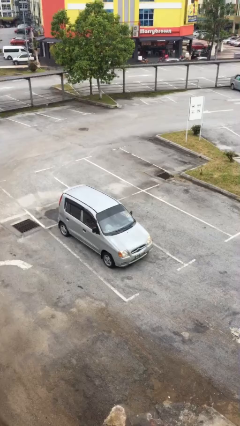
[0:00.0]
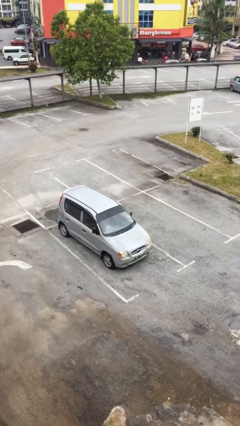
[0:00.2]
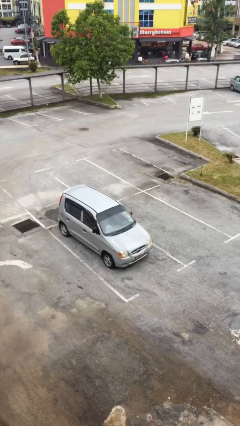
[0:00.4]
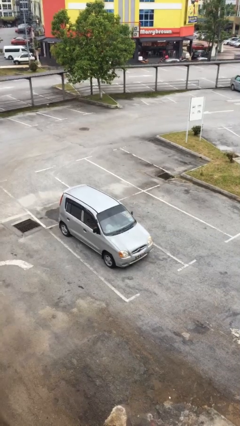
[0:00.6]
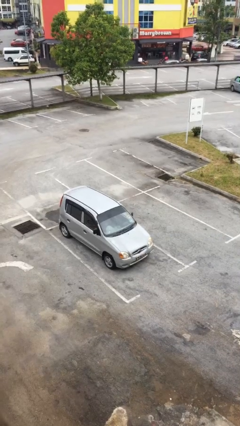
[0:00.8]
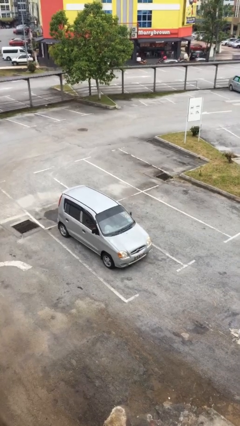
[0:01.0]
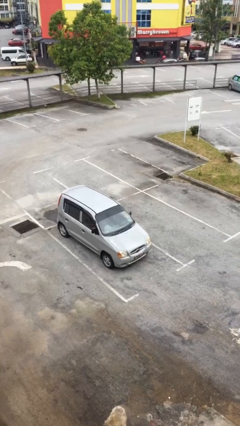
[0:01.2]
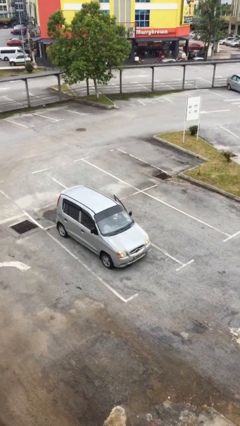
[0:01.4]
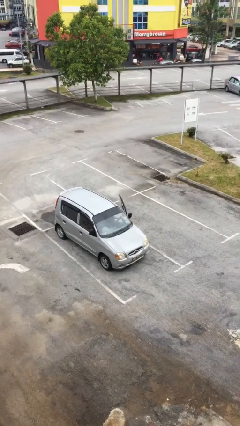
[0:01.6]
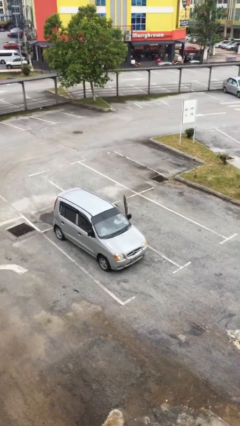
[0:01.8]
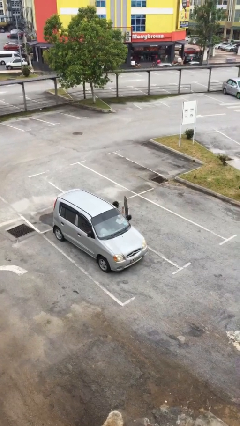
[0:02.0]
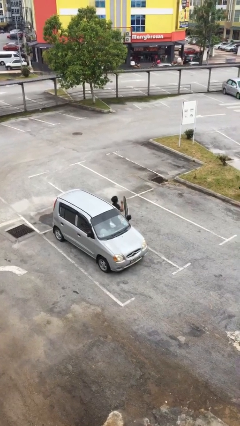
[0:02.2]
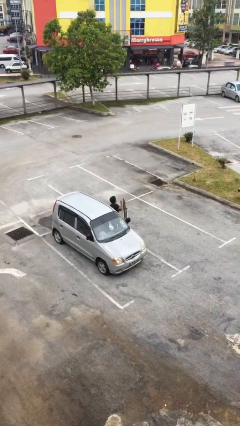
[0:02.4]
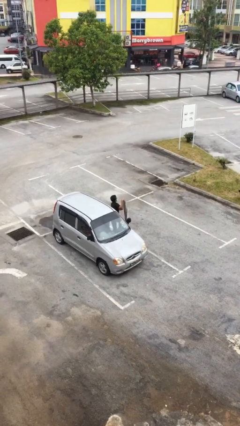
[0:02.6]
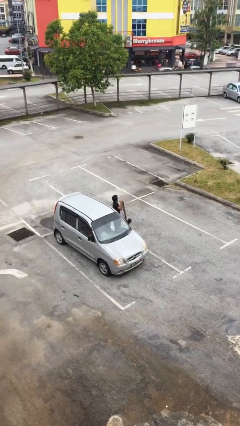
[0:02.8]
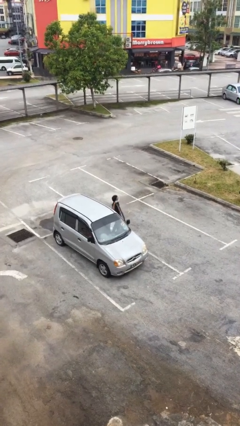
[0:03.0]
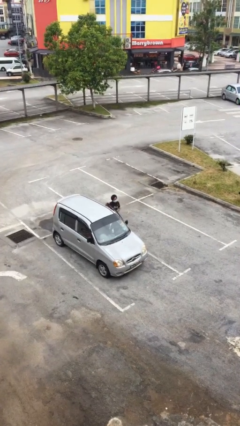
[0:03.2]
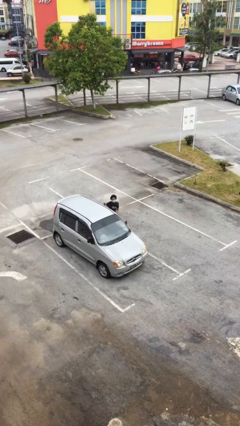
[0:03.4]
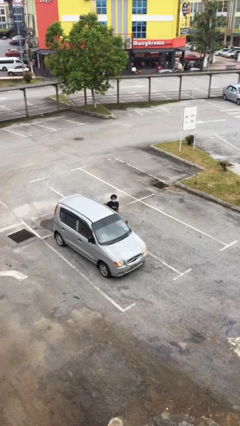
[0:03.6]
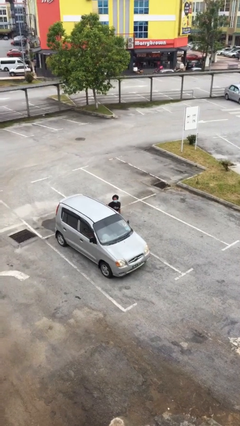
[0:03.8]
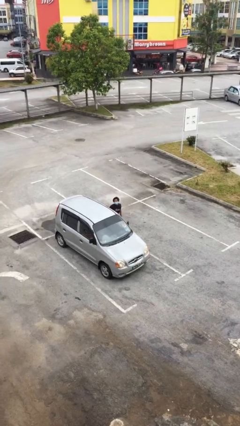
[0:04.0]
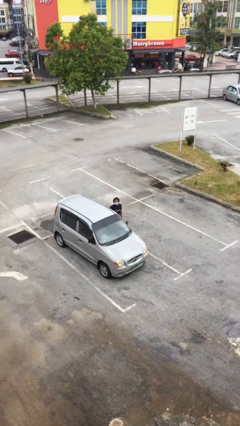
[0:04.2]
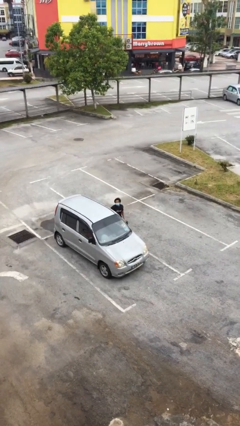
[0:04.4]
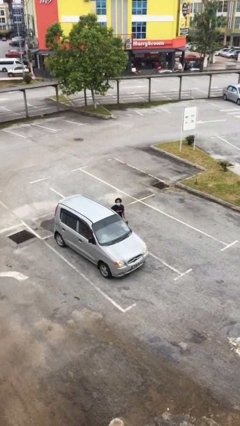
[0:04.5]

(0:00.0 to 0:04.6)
person exits car

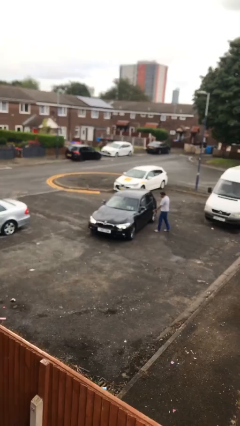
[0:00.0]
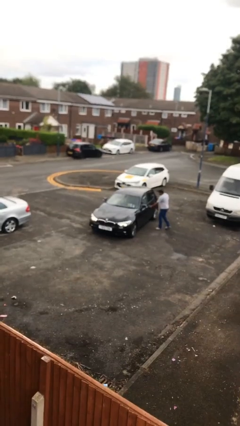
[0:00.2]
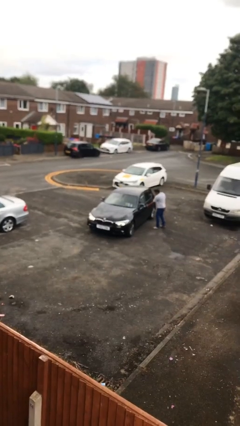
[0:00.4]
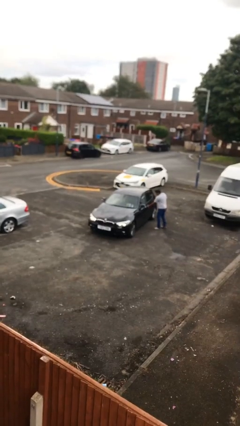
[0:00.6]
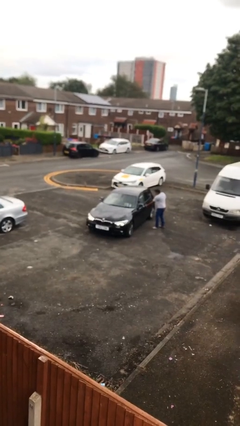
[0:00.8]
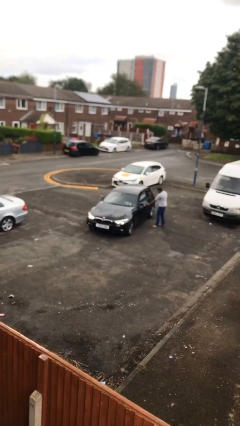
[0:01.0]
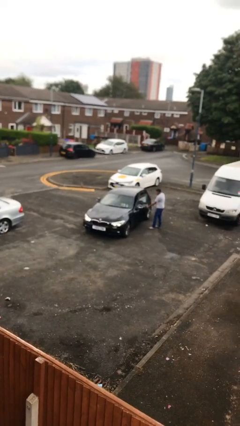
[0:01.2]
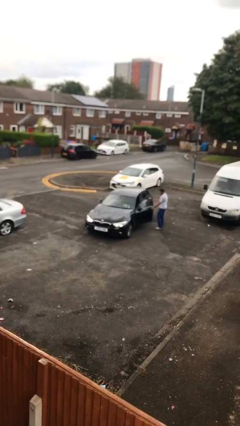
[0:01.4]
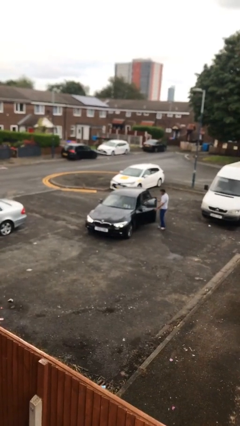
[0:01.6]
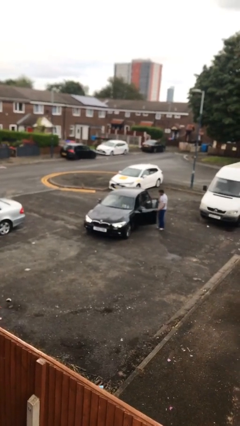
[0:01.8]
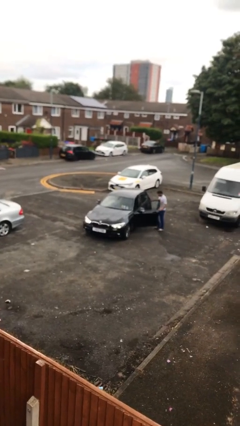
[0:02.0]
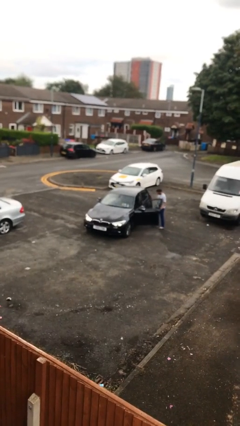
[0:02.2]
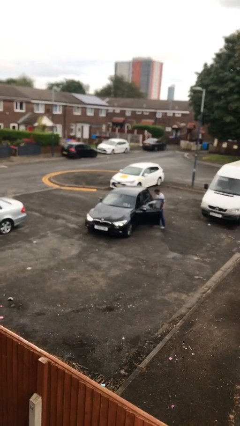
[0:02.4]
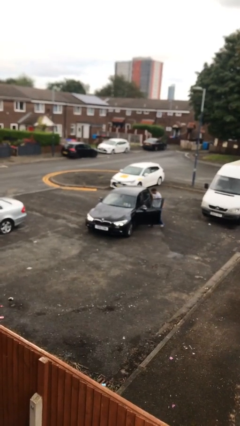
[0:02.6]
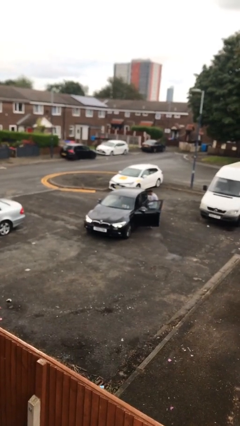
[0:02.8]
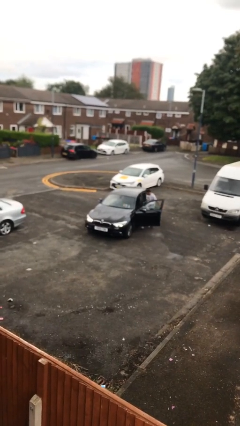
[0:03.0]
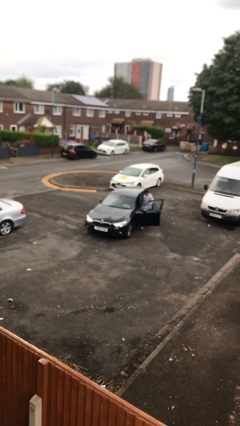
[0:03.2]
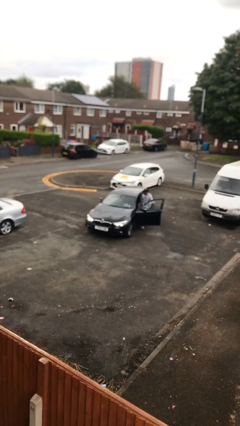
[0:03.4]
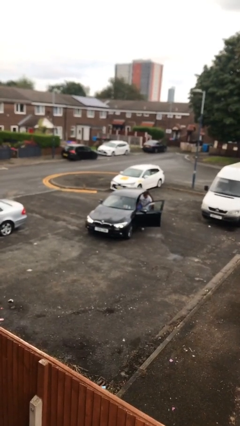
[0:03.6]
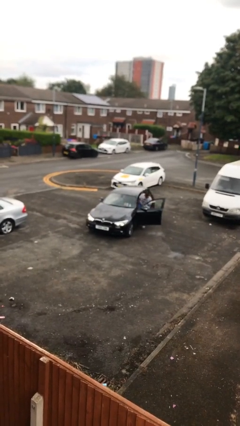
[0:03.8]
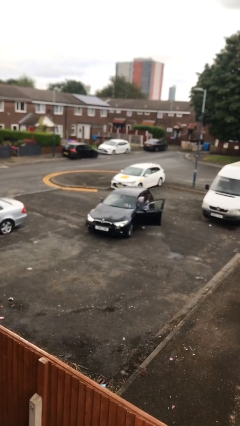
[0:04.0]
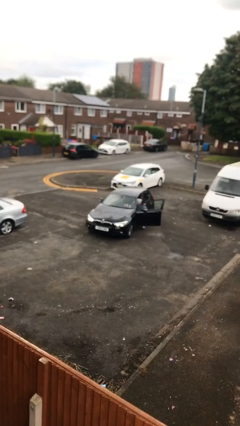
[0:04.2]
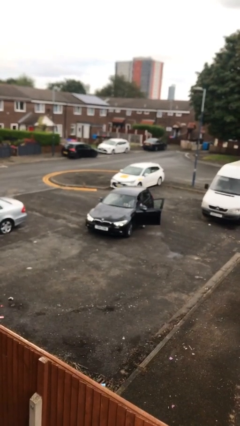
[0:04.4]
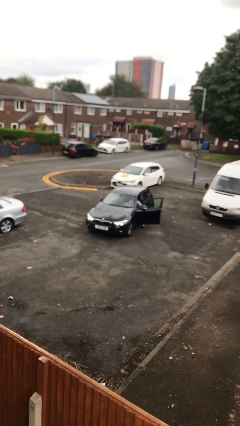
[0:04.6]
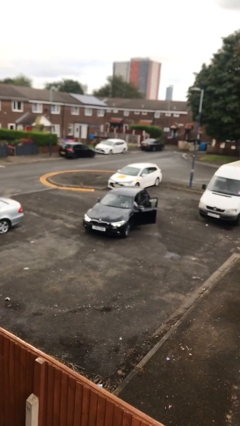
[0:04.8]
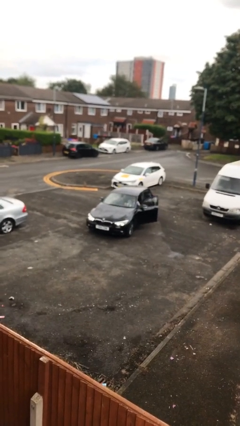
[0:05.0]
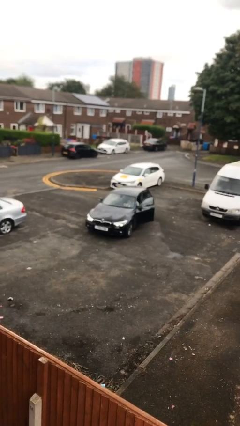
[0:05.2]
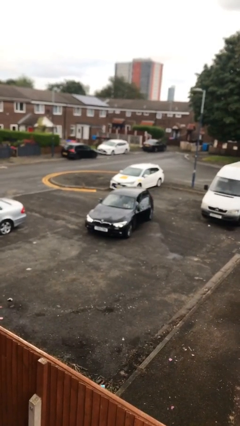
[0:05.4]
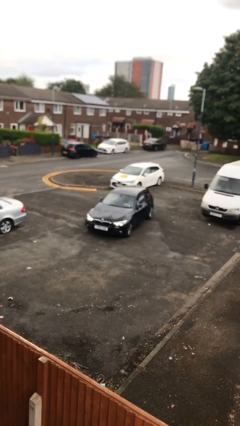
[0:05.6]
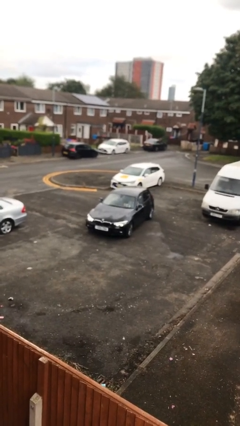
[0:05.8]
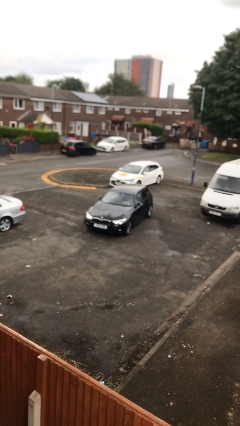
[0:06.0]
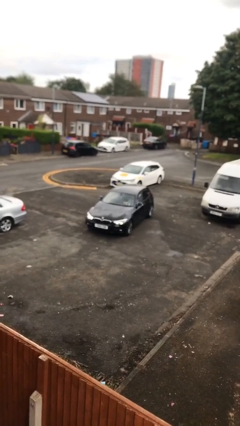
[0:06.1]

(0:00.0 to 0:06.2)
car picks up person

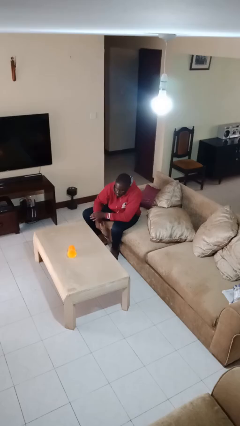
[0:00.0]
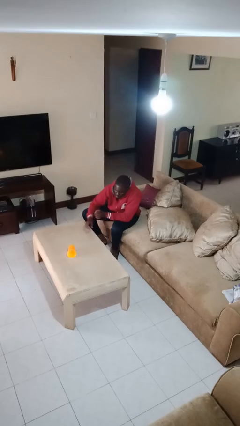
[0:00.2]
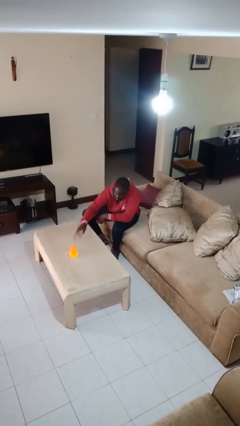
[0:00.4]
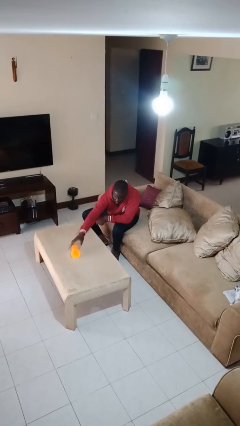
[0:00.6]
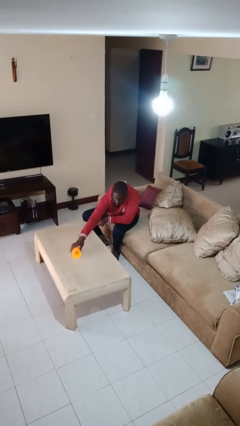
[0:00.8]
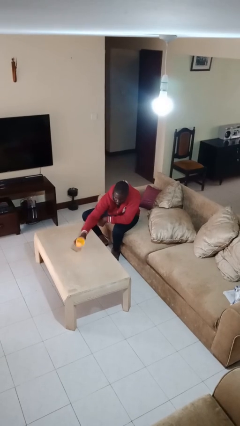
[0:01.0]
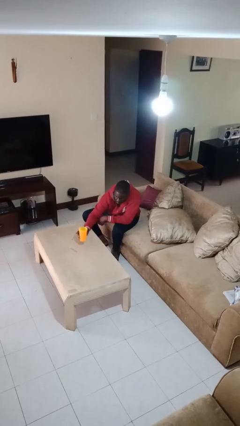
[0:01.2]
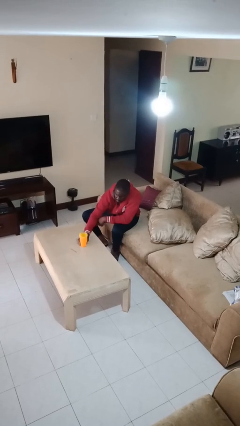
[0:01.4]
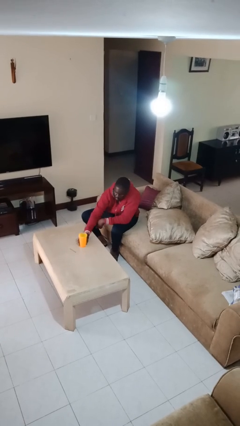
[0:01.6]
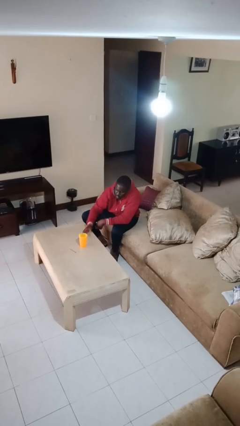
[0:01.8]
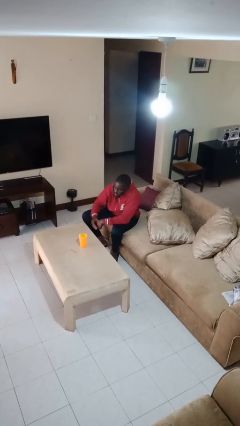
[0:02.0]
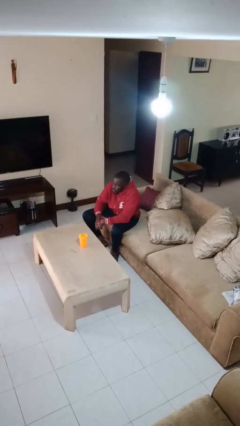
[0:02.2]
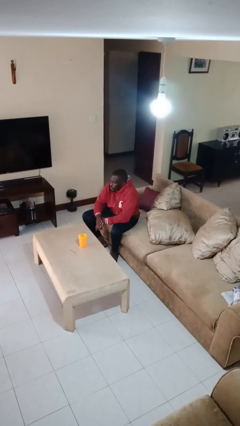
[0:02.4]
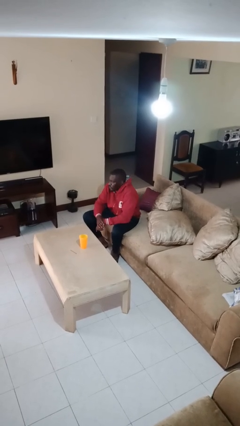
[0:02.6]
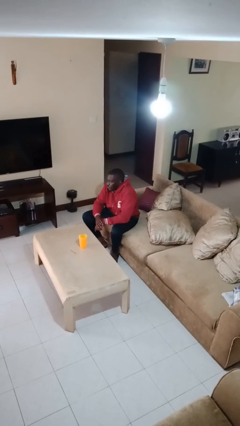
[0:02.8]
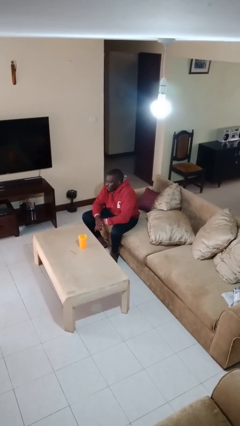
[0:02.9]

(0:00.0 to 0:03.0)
person sets upright glass

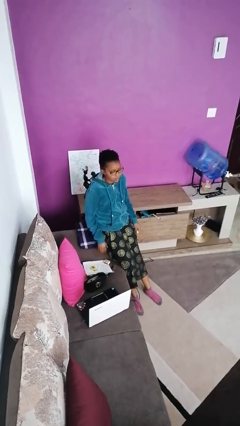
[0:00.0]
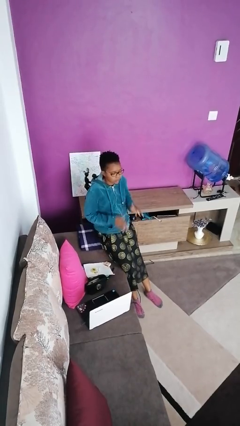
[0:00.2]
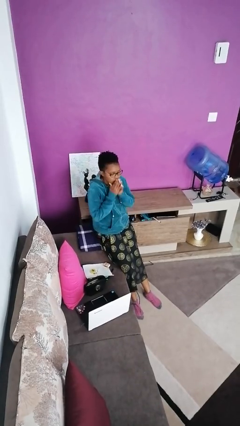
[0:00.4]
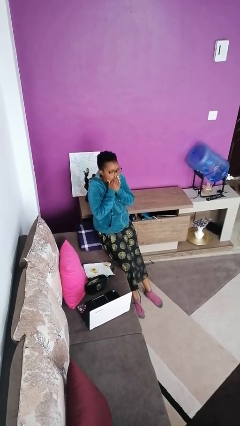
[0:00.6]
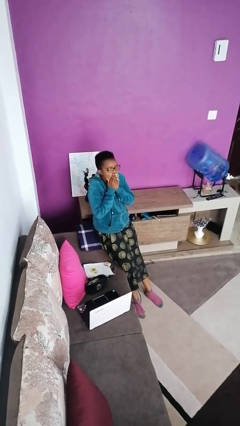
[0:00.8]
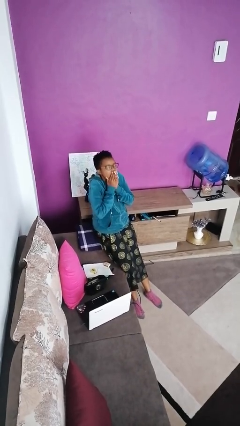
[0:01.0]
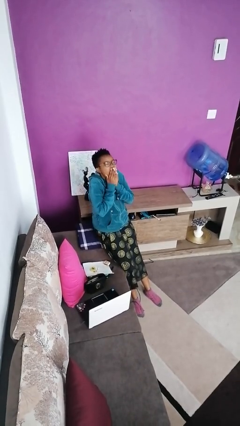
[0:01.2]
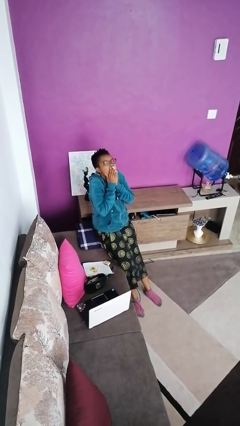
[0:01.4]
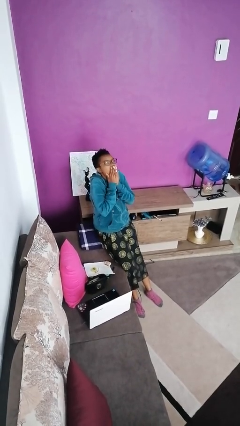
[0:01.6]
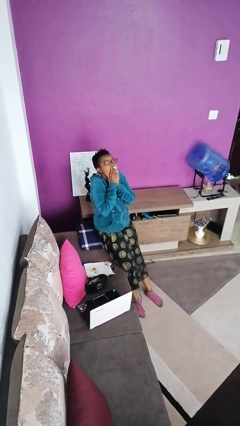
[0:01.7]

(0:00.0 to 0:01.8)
person opens cabinet

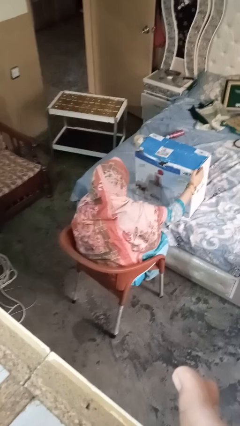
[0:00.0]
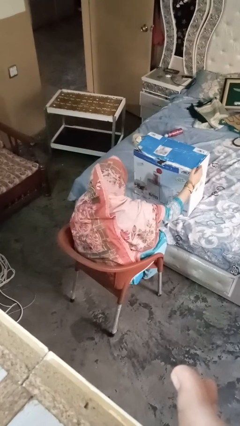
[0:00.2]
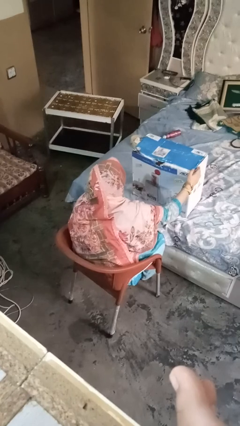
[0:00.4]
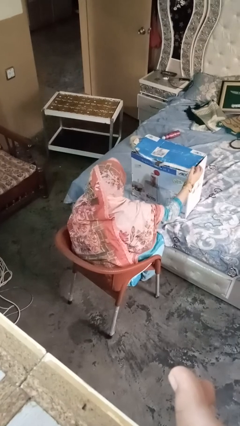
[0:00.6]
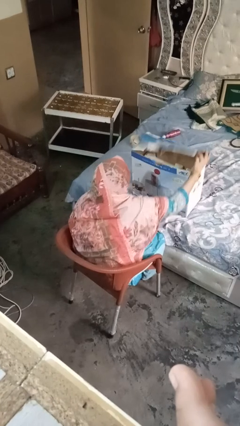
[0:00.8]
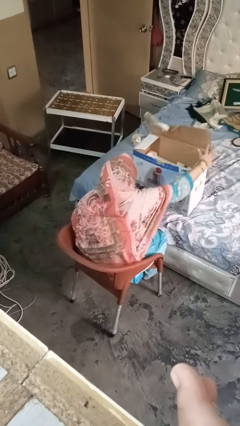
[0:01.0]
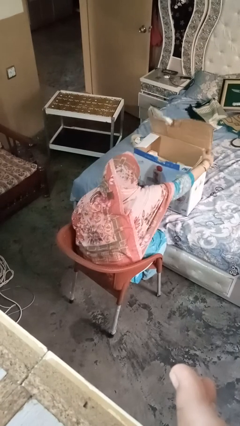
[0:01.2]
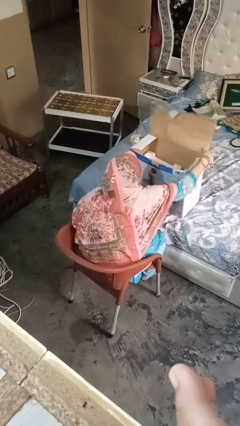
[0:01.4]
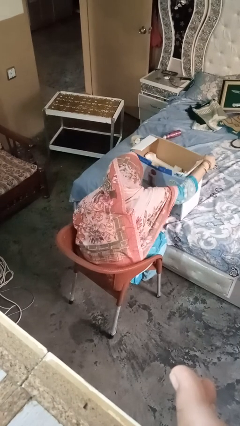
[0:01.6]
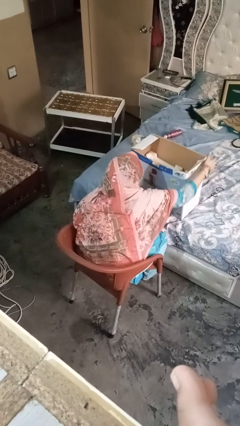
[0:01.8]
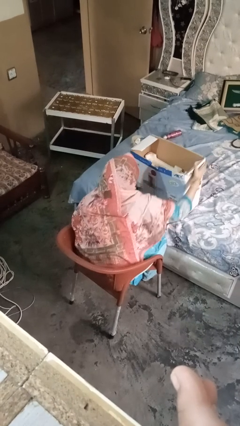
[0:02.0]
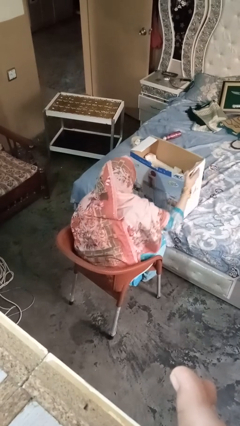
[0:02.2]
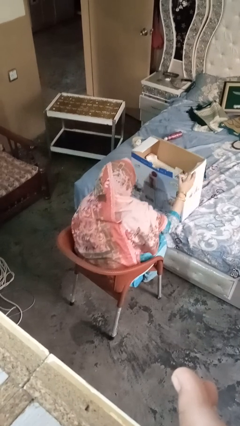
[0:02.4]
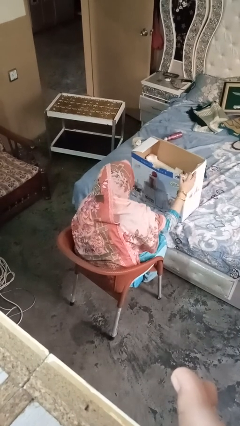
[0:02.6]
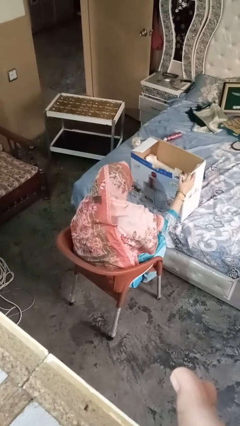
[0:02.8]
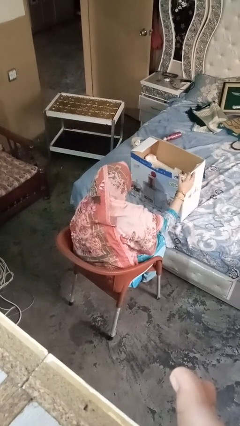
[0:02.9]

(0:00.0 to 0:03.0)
person opens box
